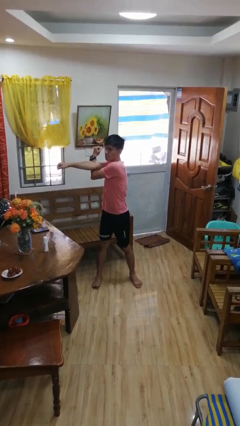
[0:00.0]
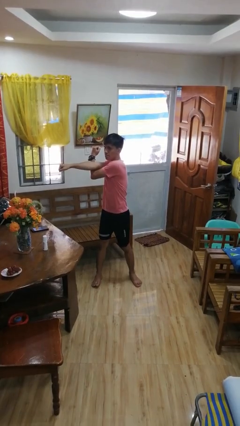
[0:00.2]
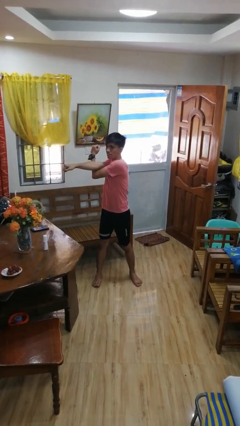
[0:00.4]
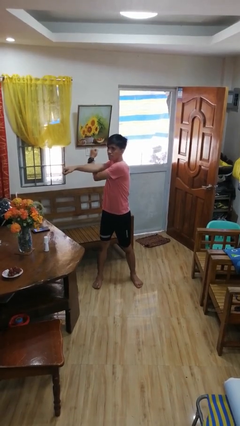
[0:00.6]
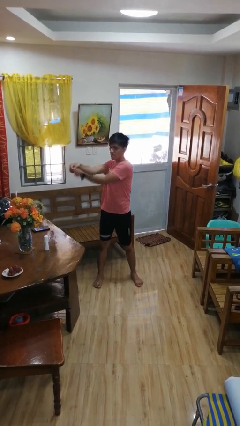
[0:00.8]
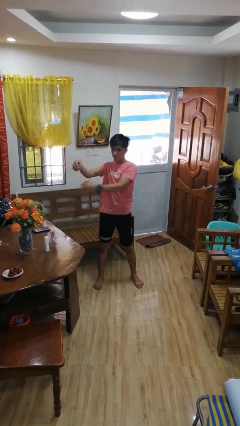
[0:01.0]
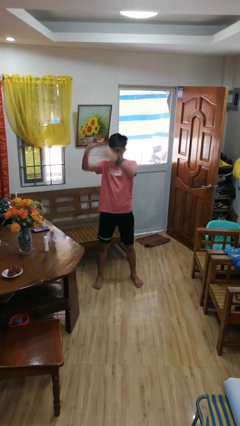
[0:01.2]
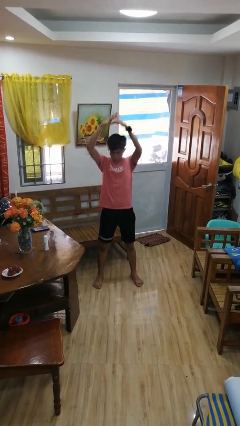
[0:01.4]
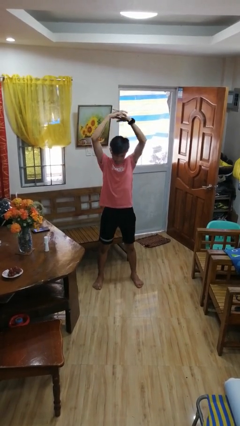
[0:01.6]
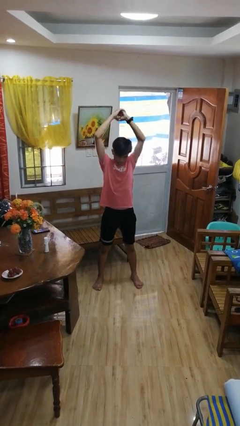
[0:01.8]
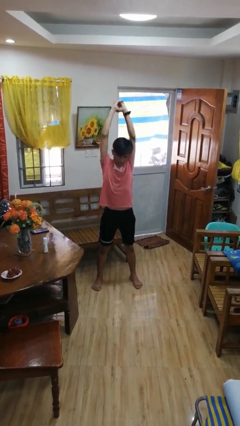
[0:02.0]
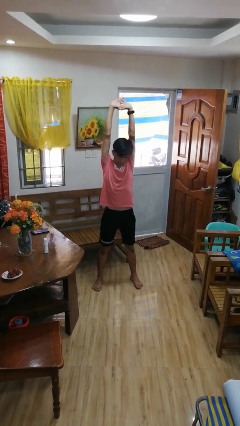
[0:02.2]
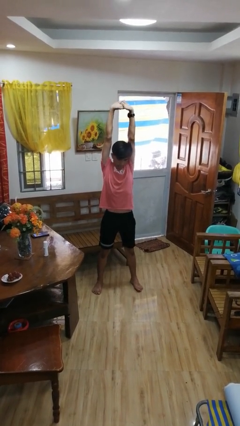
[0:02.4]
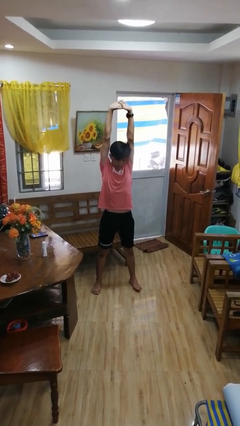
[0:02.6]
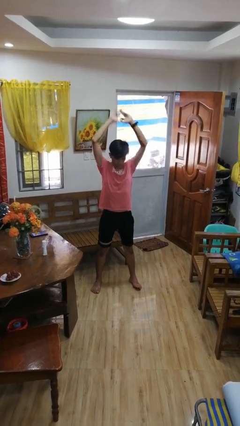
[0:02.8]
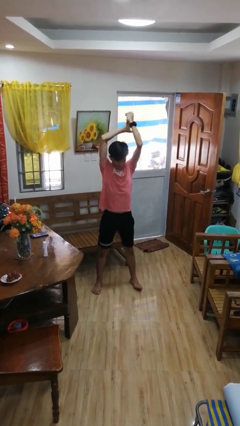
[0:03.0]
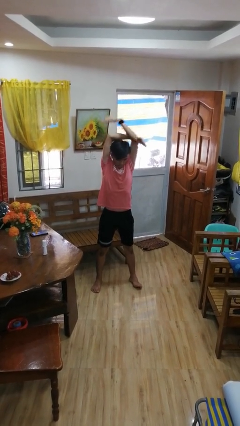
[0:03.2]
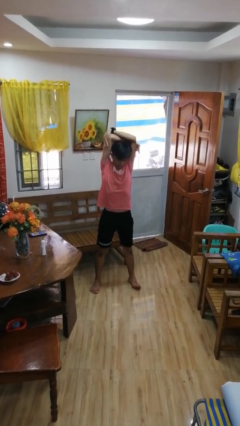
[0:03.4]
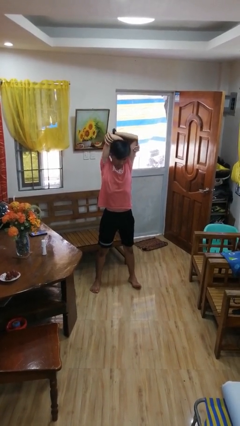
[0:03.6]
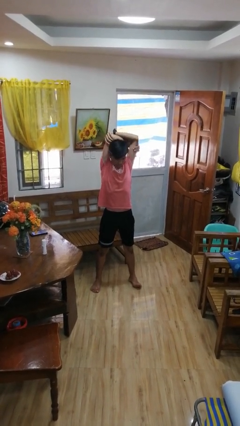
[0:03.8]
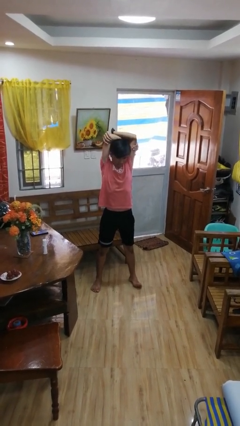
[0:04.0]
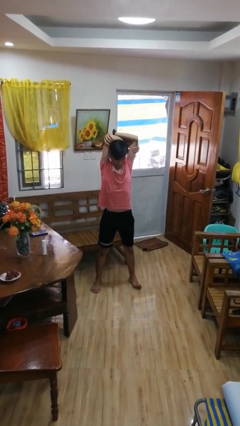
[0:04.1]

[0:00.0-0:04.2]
person stretches arms over head

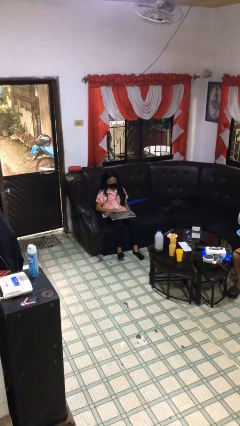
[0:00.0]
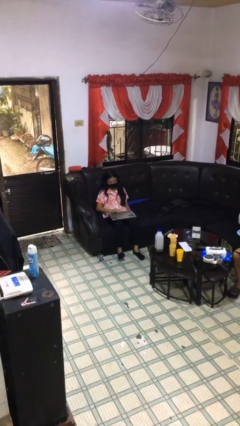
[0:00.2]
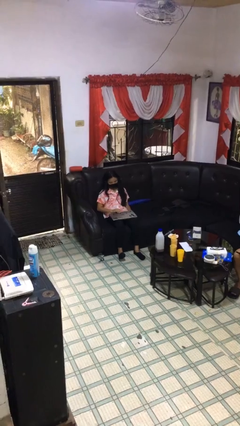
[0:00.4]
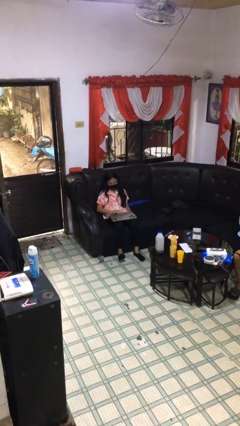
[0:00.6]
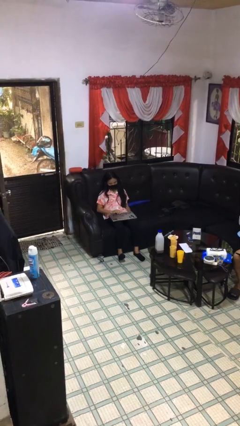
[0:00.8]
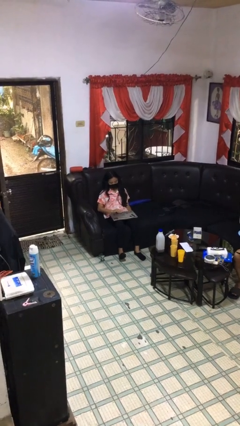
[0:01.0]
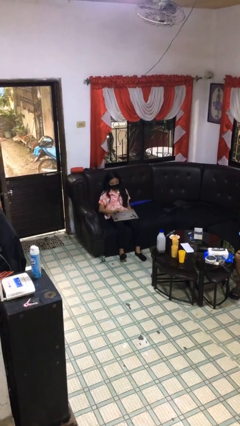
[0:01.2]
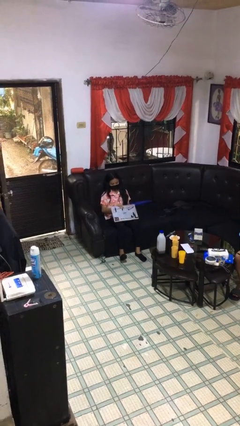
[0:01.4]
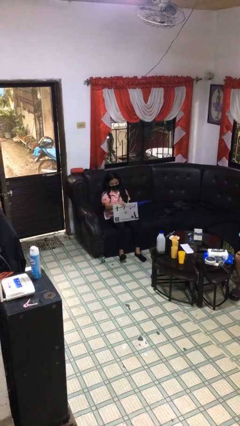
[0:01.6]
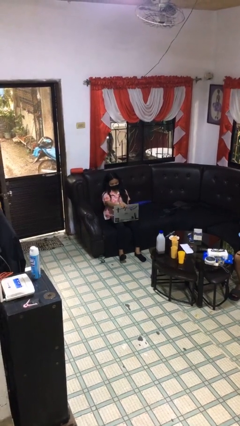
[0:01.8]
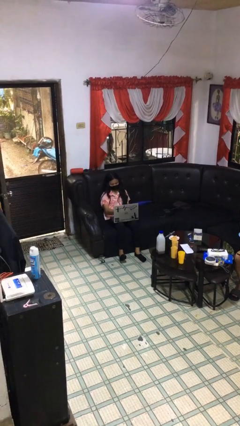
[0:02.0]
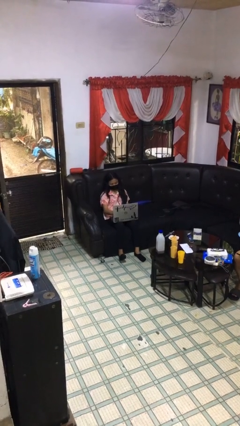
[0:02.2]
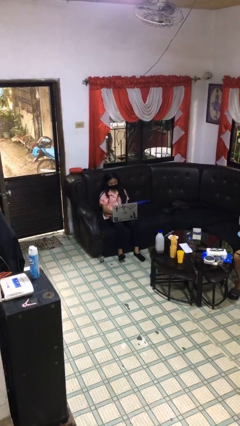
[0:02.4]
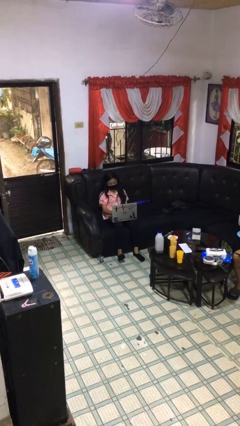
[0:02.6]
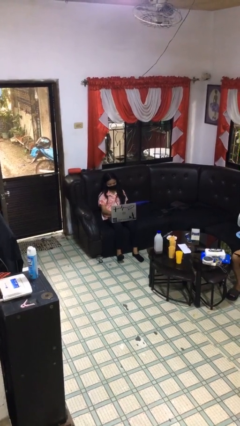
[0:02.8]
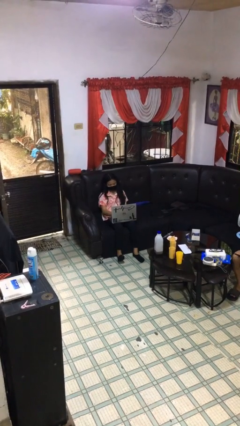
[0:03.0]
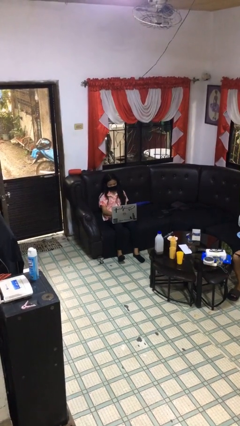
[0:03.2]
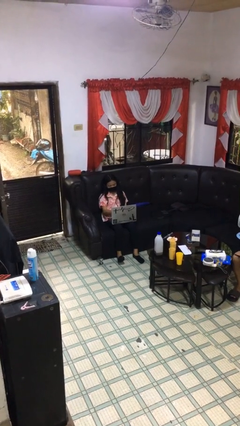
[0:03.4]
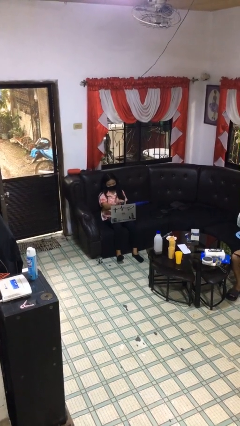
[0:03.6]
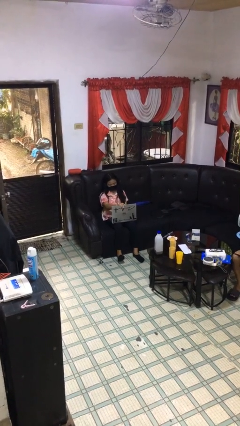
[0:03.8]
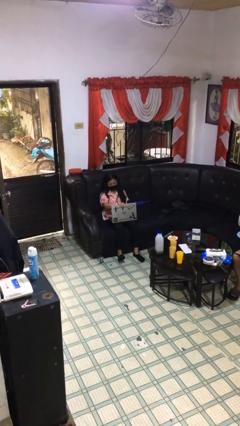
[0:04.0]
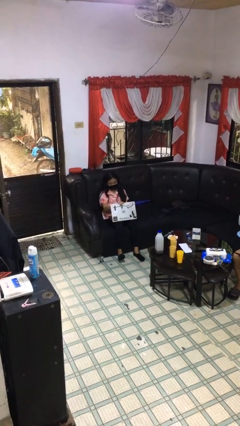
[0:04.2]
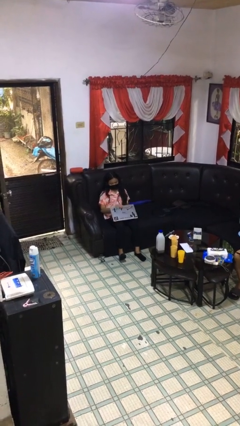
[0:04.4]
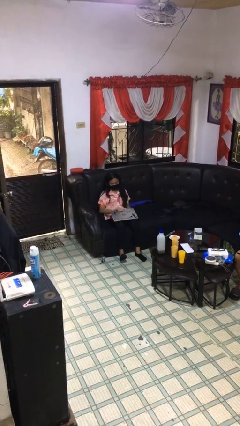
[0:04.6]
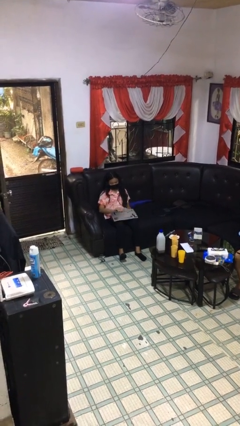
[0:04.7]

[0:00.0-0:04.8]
person interacts with laptop

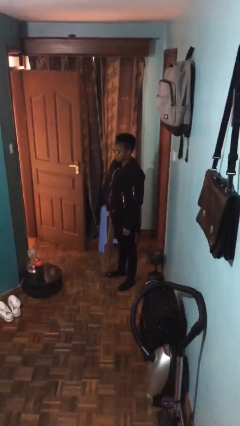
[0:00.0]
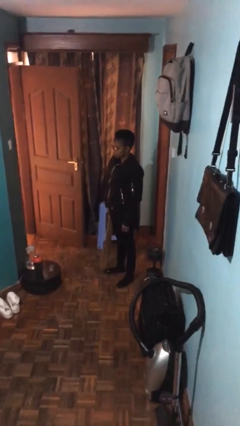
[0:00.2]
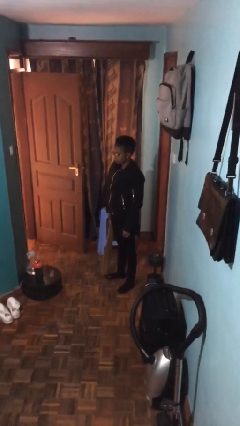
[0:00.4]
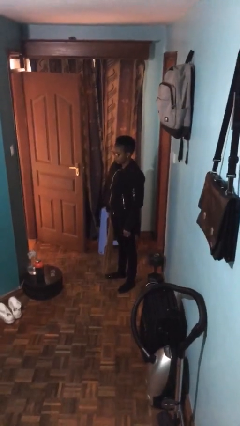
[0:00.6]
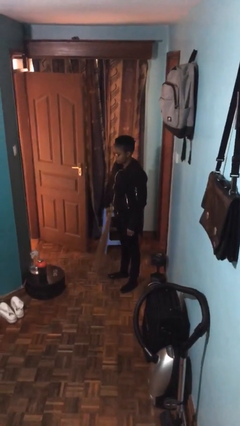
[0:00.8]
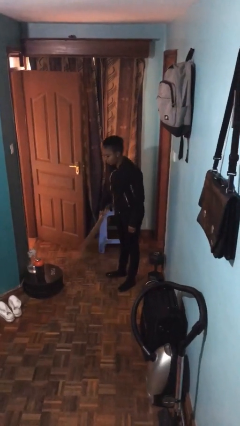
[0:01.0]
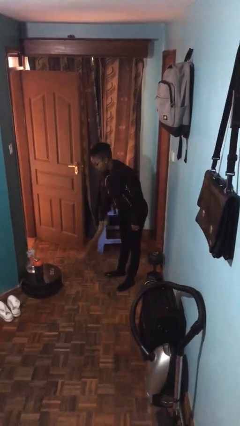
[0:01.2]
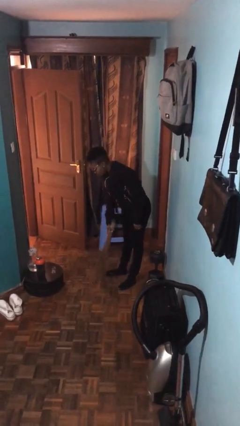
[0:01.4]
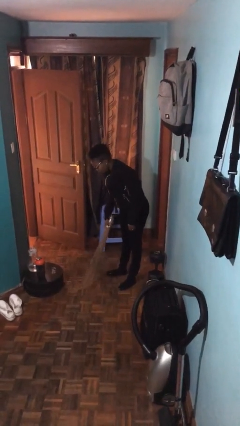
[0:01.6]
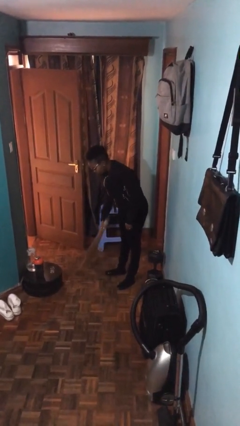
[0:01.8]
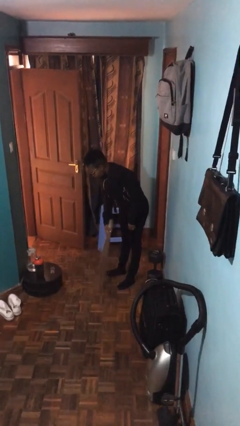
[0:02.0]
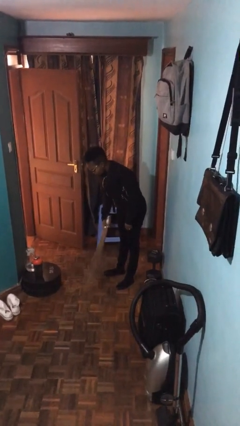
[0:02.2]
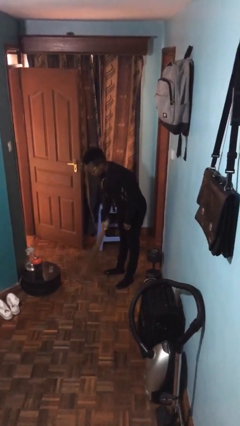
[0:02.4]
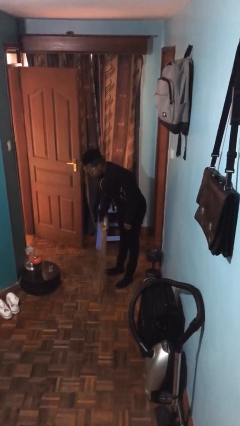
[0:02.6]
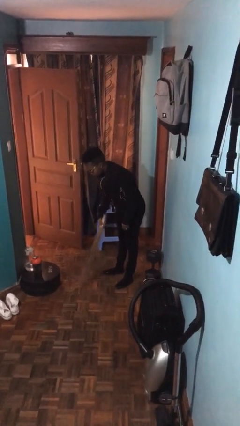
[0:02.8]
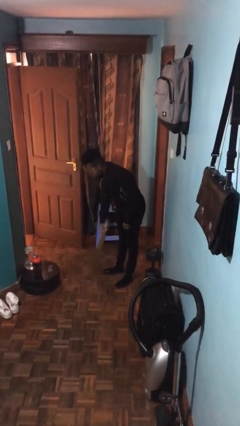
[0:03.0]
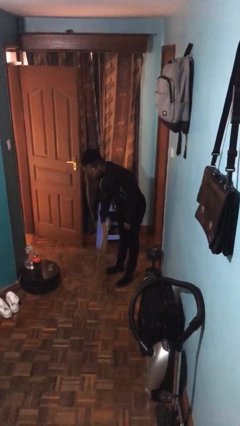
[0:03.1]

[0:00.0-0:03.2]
person sweeps floor

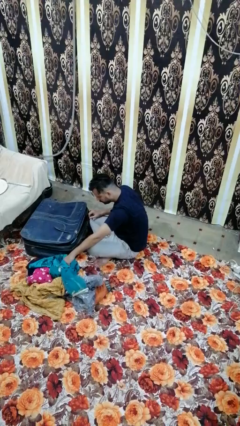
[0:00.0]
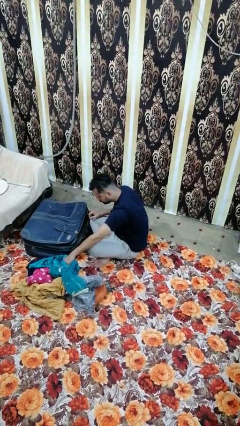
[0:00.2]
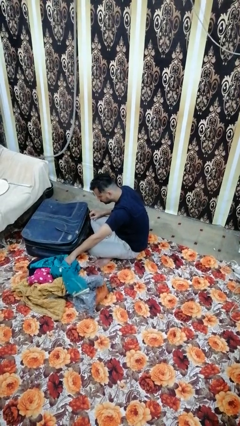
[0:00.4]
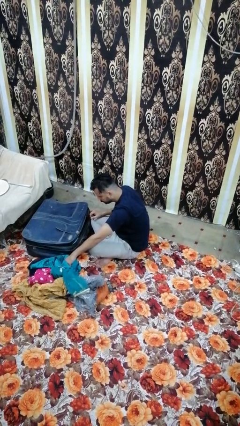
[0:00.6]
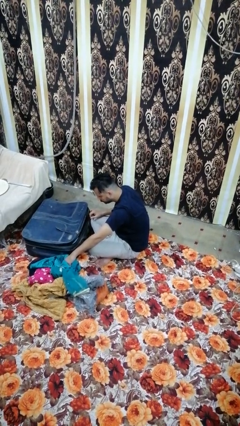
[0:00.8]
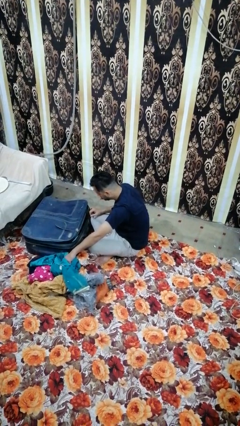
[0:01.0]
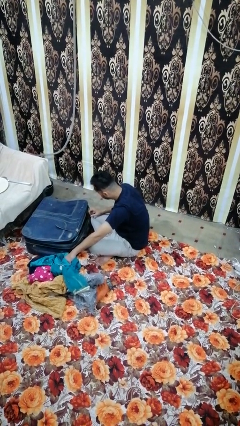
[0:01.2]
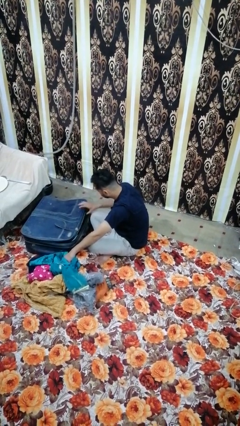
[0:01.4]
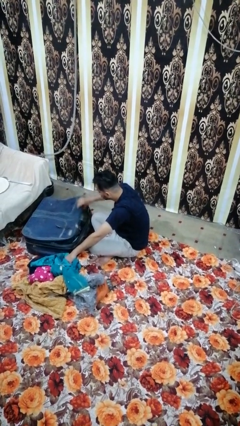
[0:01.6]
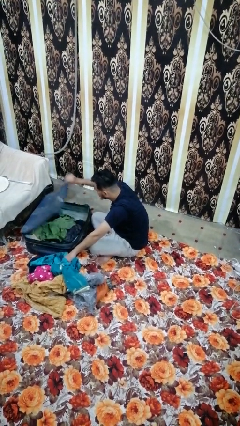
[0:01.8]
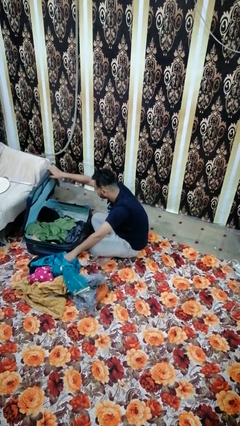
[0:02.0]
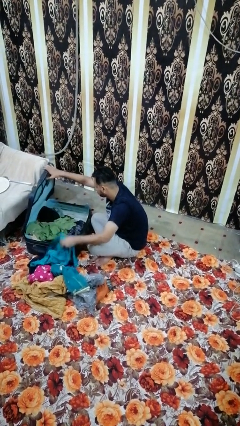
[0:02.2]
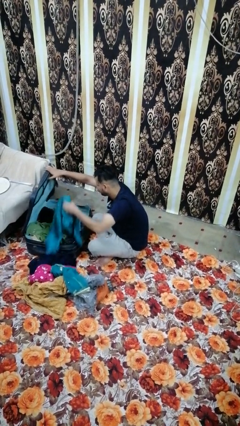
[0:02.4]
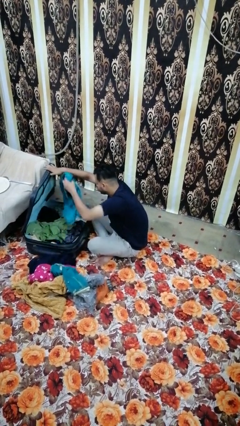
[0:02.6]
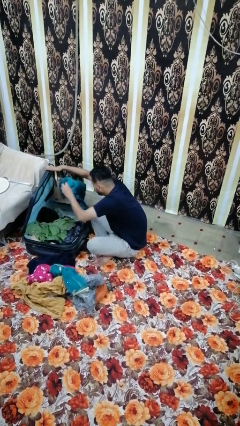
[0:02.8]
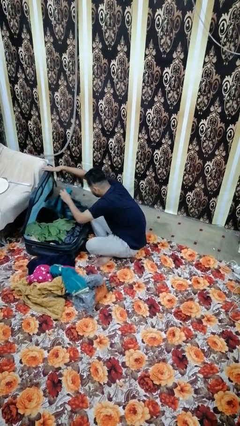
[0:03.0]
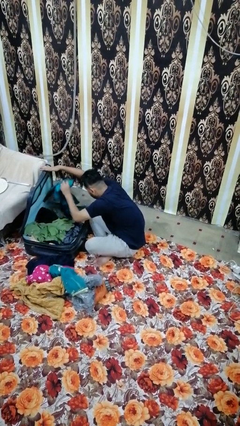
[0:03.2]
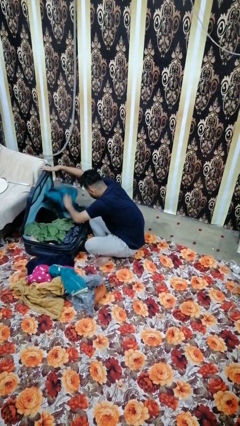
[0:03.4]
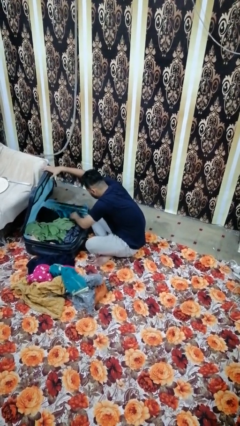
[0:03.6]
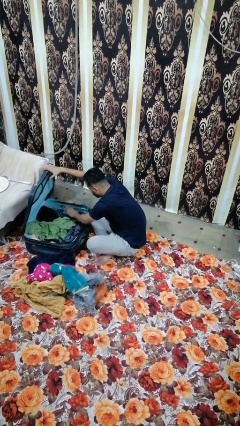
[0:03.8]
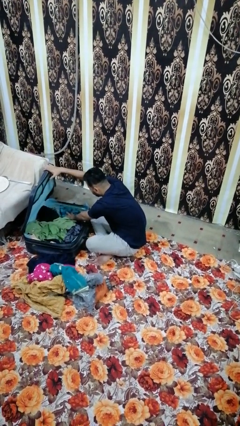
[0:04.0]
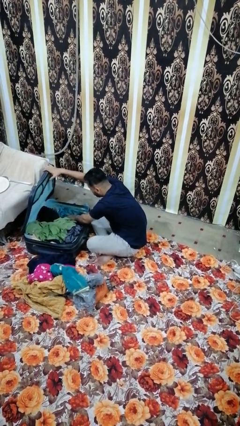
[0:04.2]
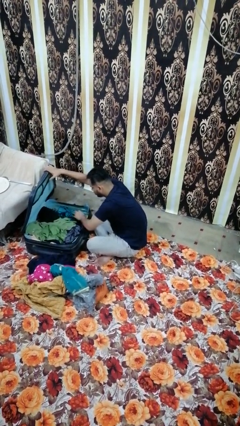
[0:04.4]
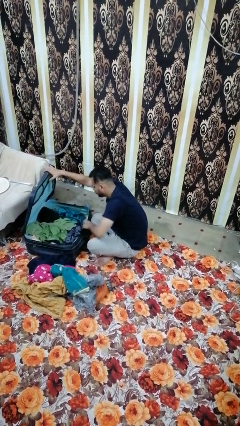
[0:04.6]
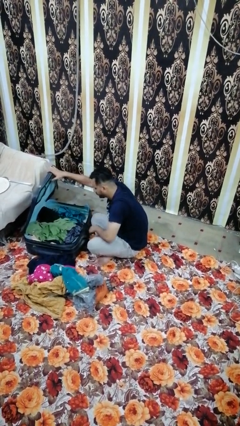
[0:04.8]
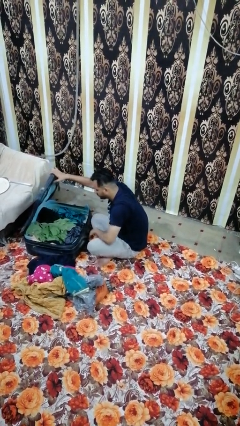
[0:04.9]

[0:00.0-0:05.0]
person loads clothes into suitcase

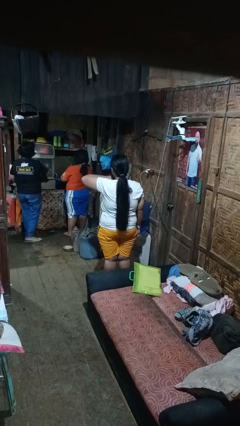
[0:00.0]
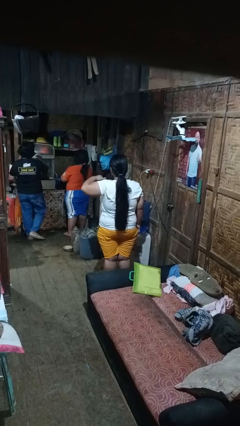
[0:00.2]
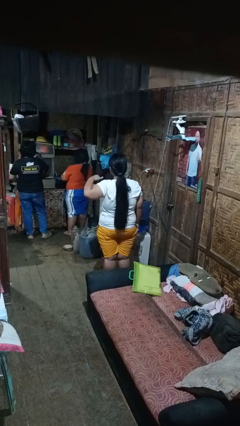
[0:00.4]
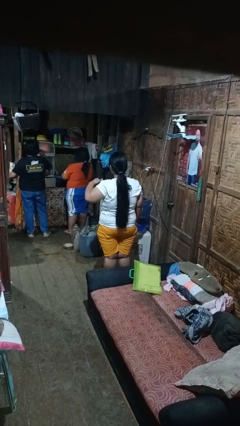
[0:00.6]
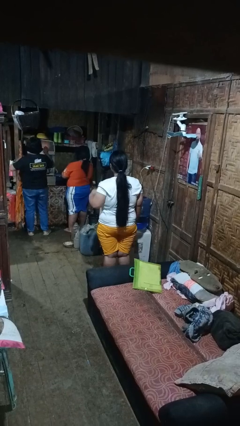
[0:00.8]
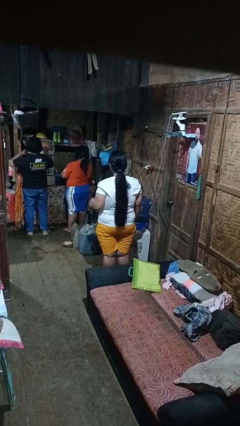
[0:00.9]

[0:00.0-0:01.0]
person gestures cut
